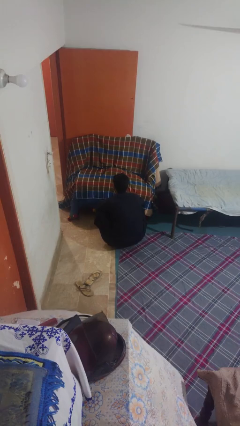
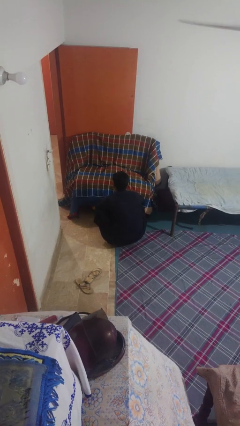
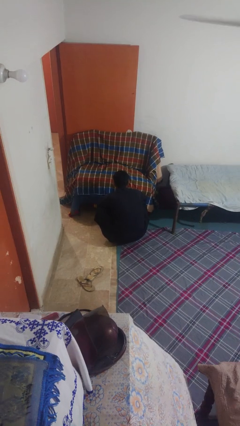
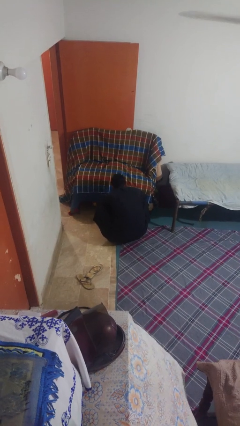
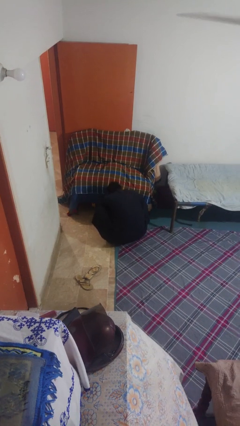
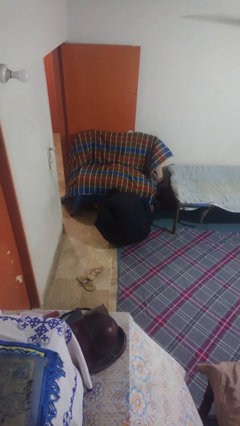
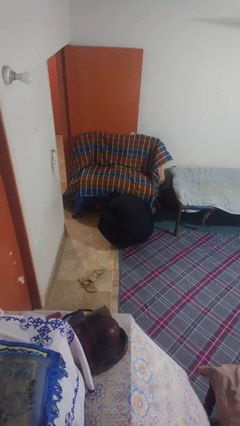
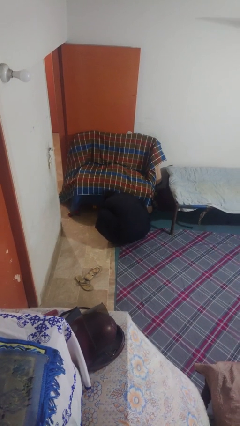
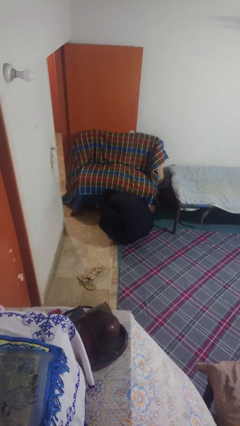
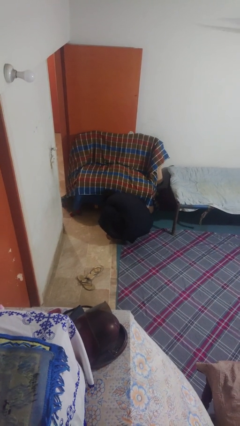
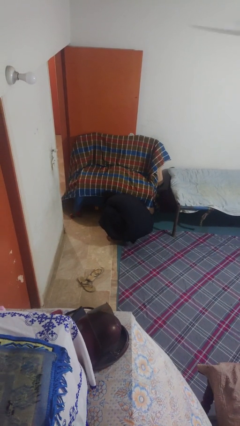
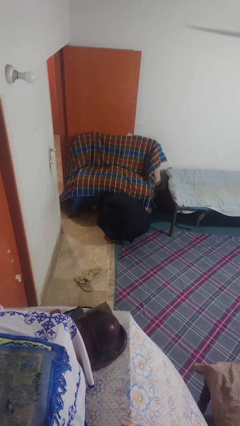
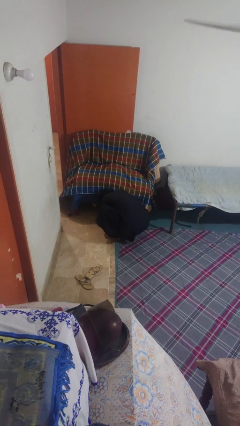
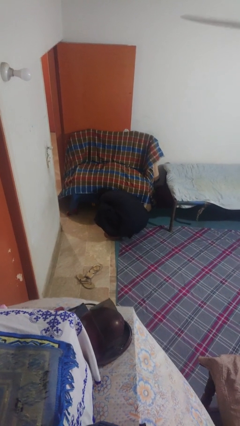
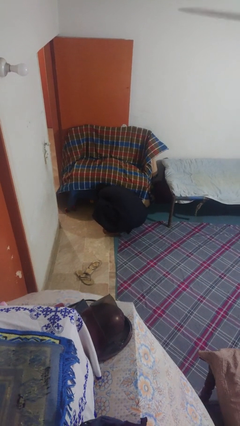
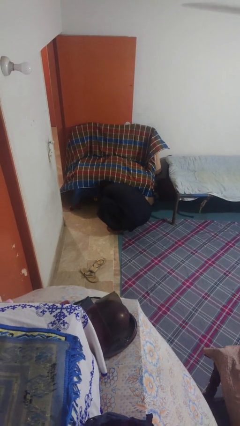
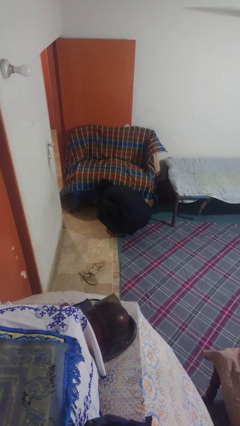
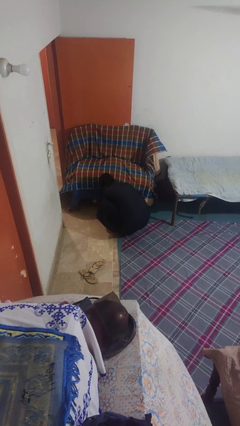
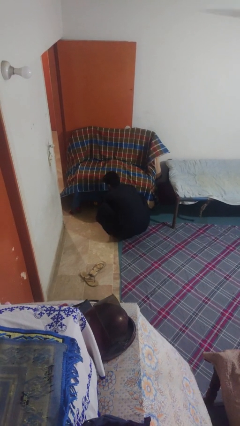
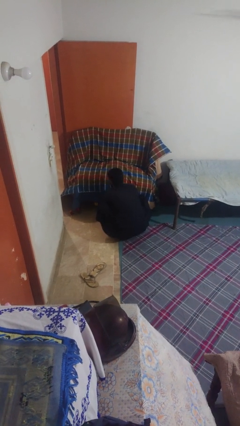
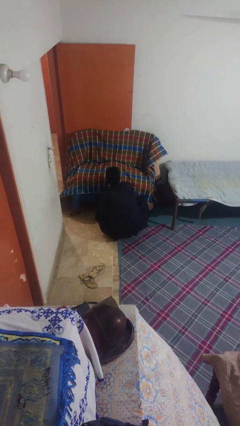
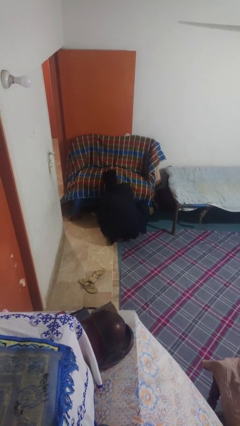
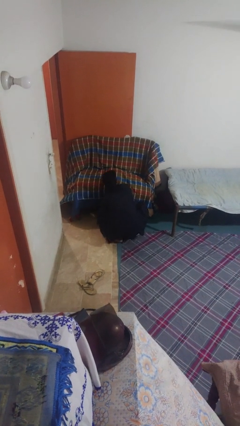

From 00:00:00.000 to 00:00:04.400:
person searches under couch

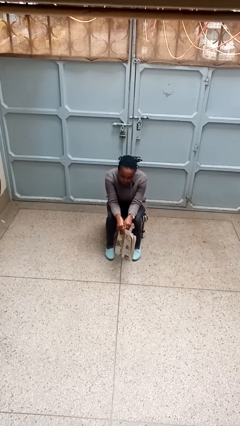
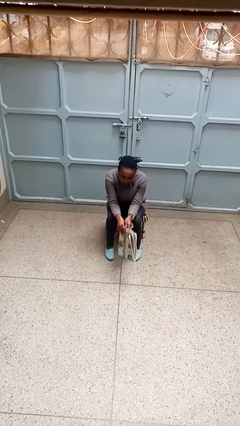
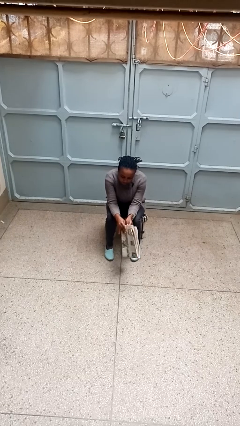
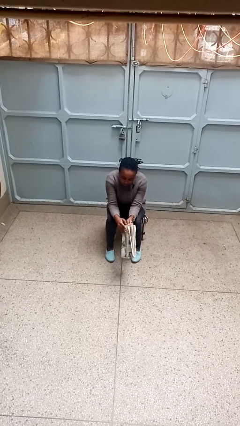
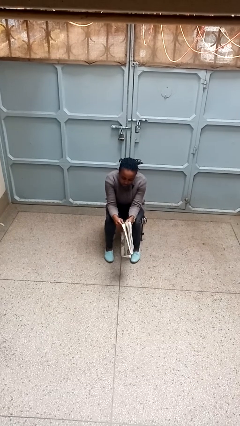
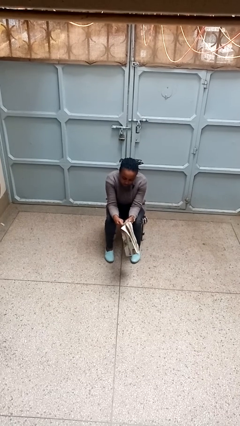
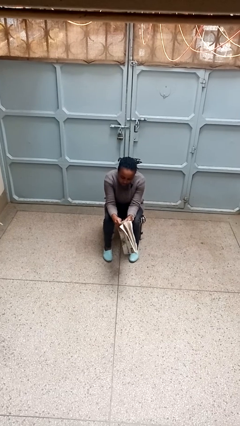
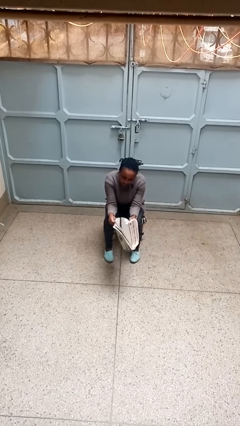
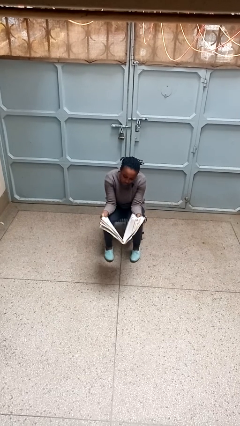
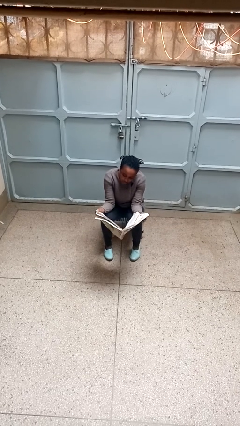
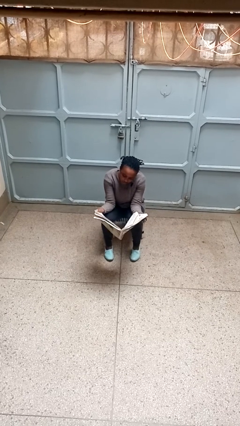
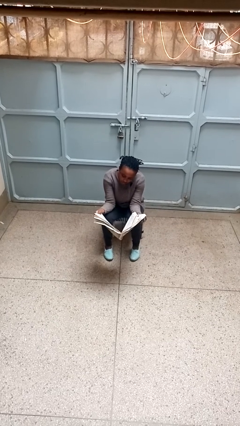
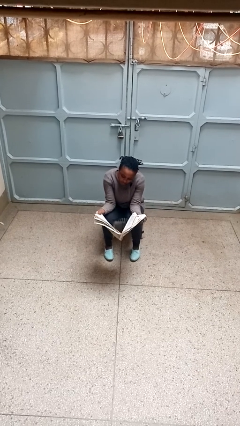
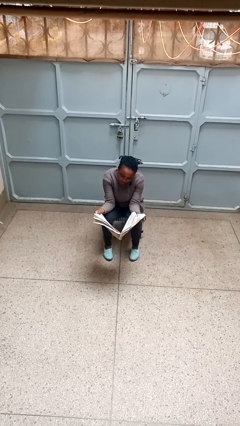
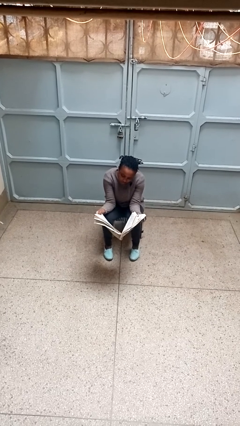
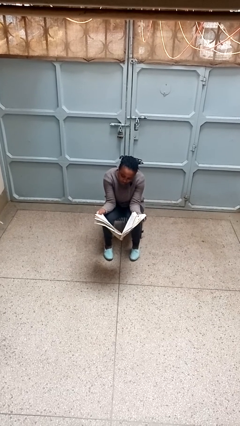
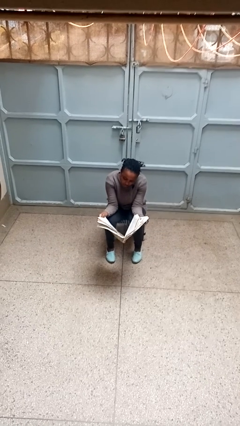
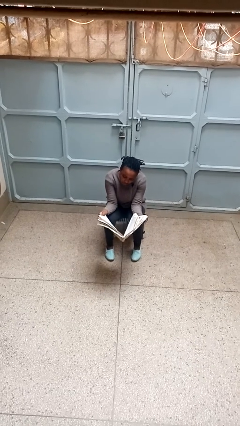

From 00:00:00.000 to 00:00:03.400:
person reads newspaper

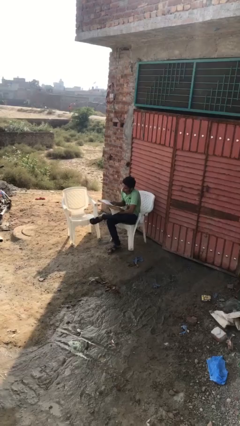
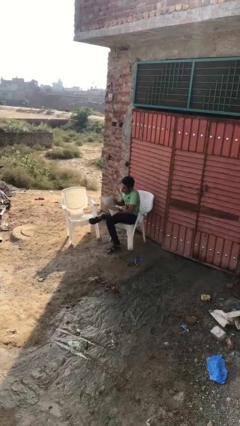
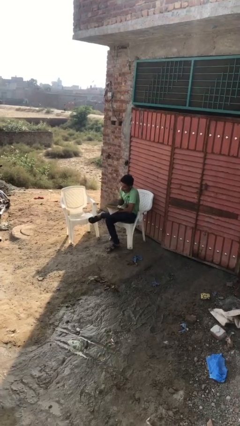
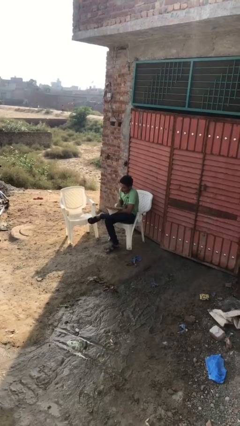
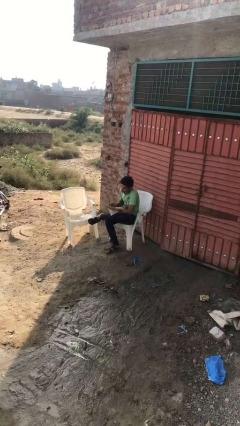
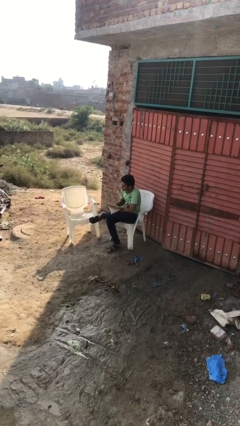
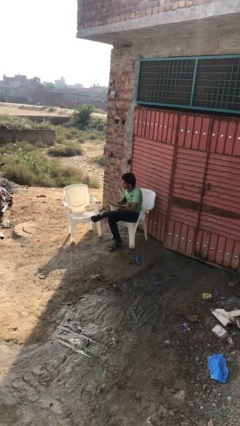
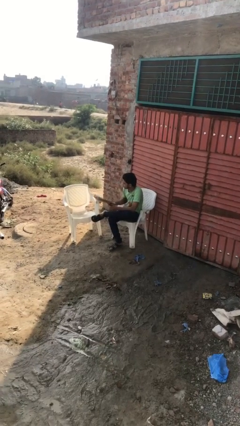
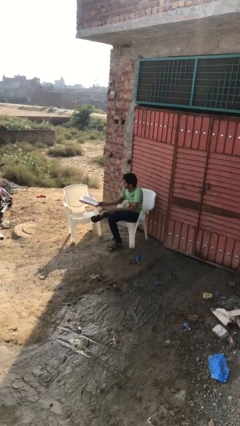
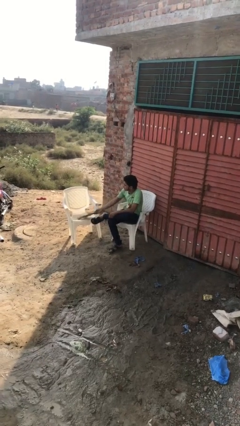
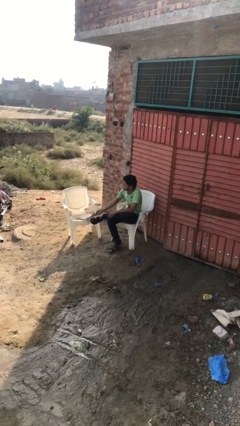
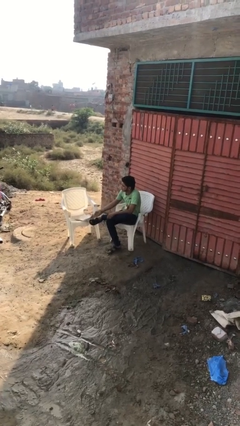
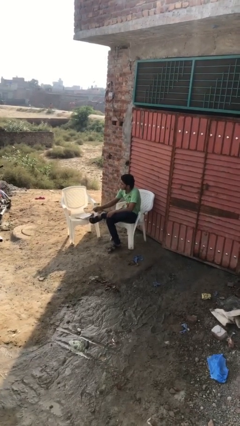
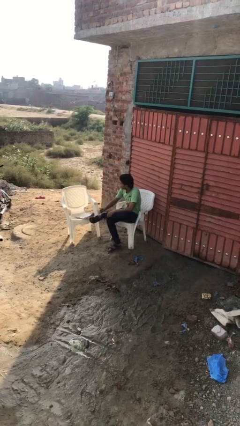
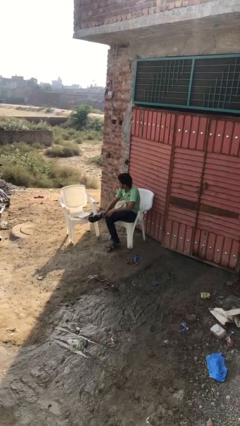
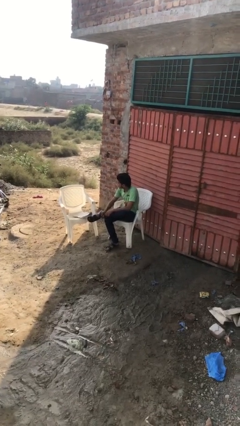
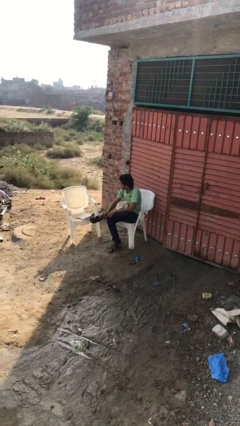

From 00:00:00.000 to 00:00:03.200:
person puts down object on table

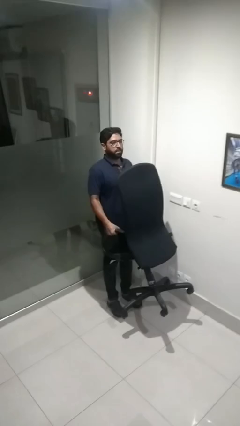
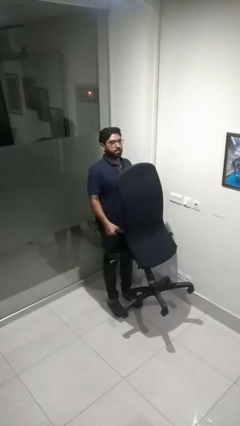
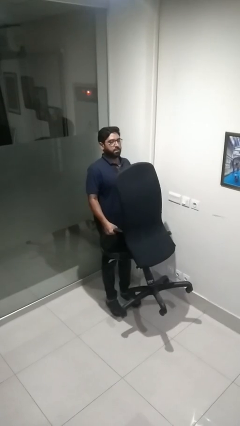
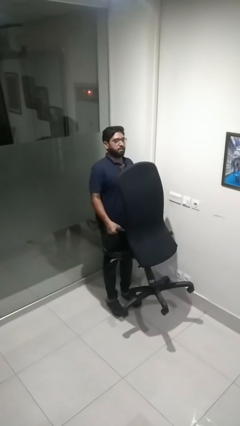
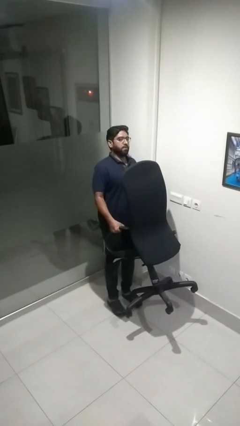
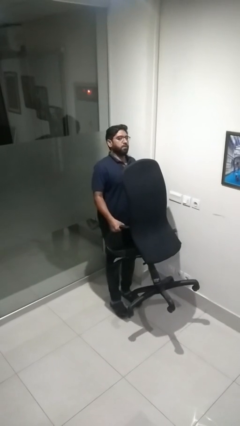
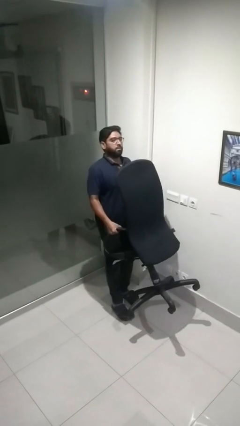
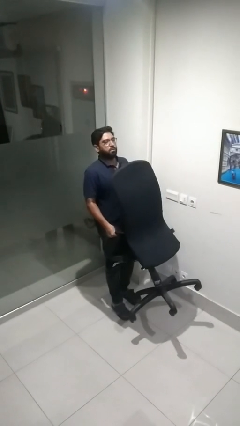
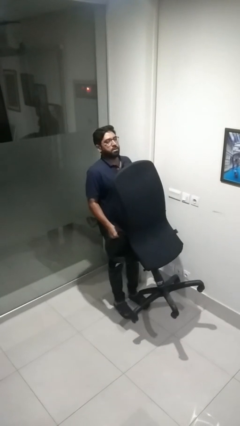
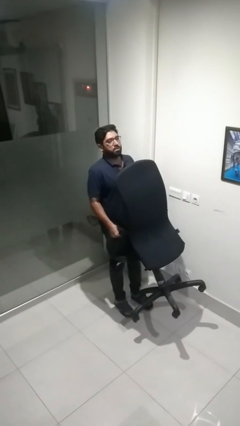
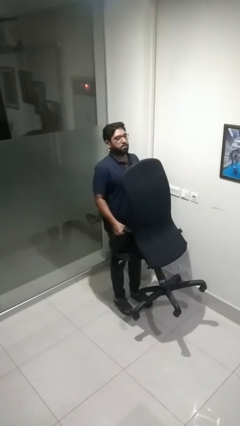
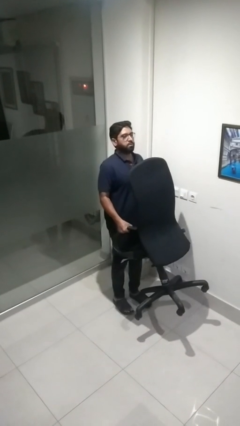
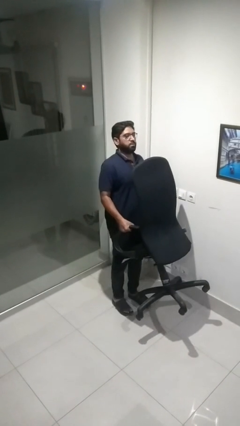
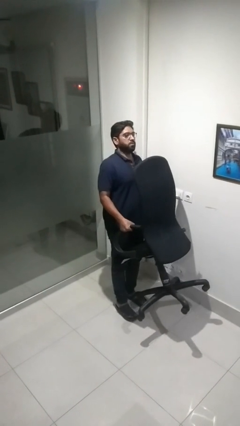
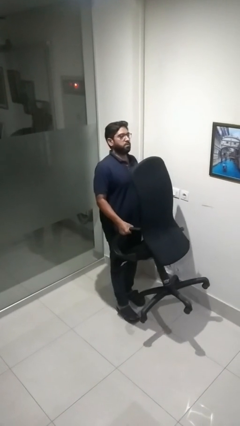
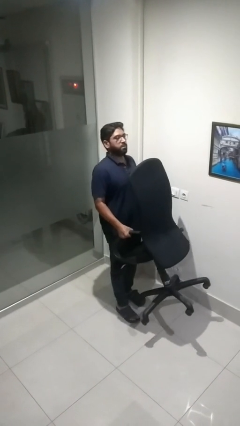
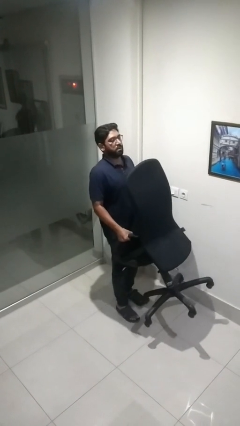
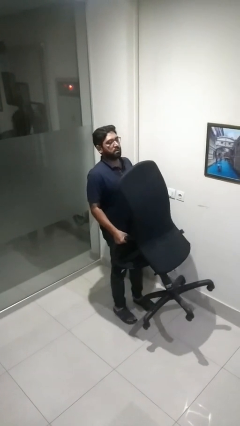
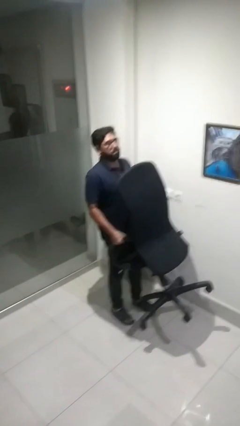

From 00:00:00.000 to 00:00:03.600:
person carries furniture

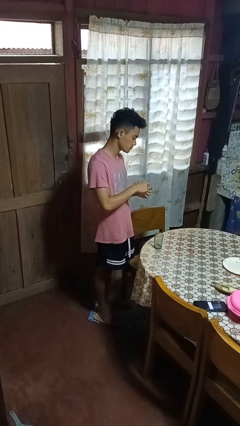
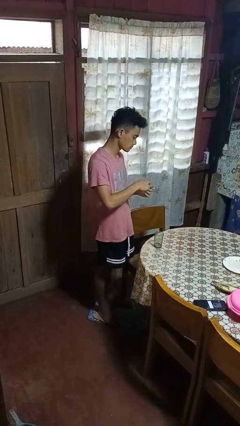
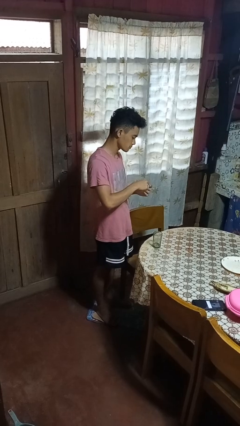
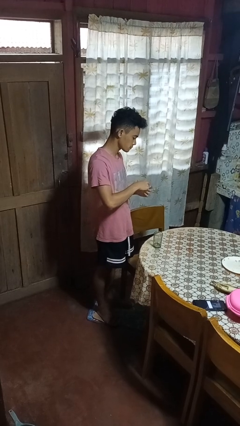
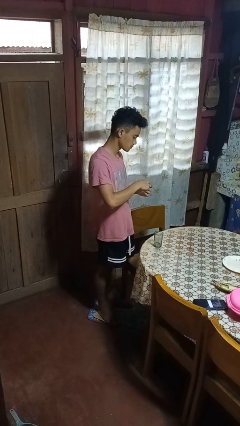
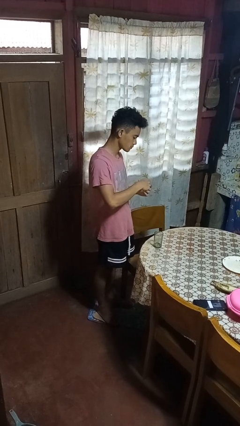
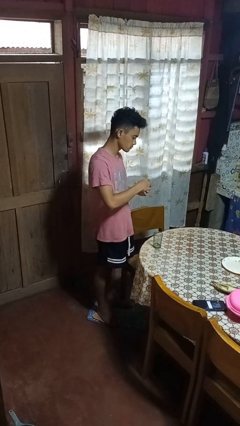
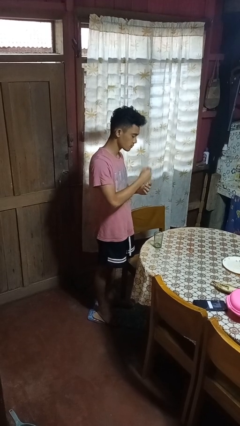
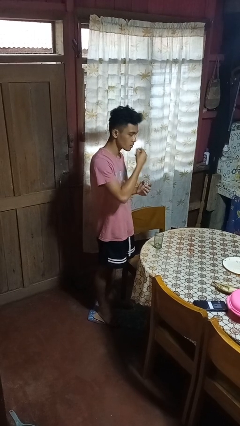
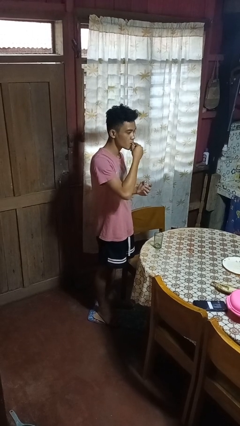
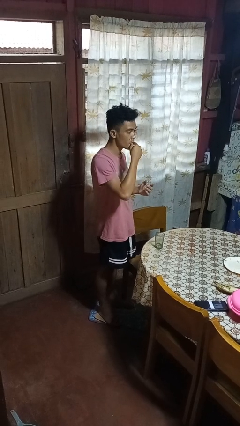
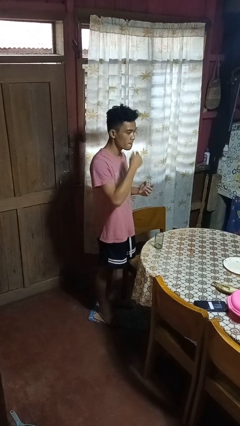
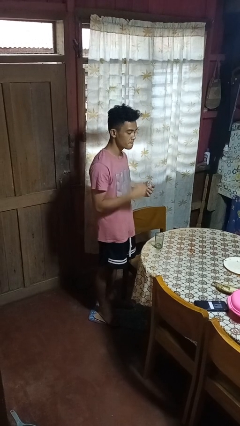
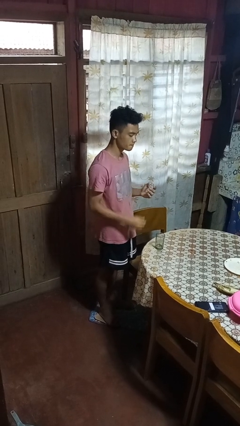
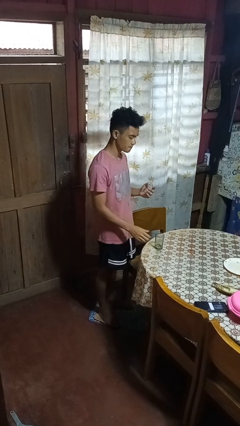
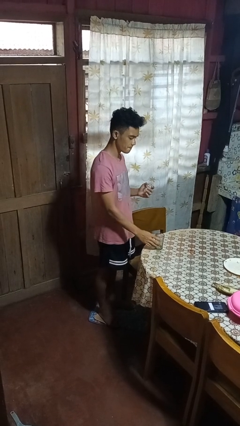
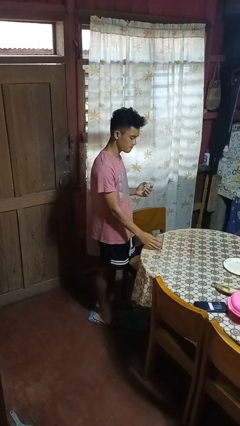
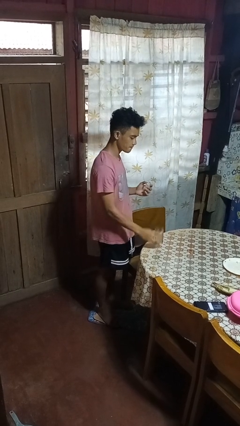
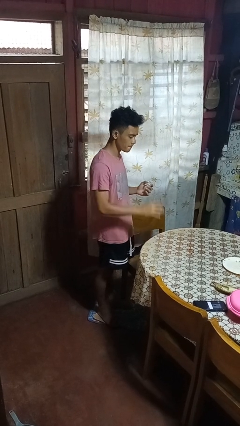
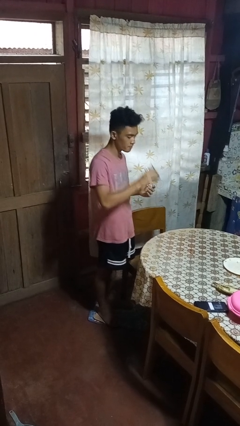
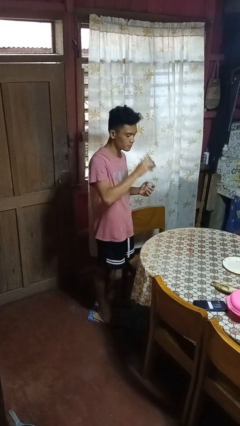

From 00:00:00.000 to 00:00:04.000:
person takes medicine pills
